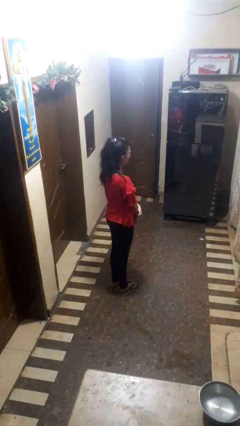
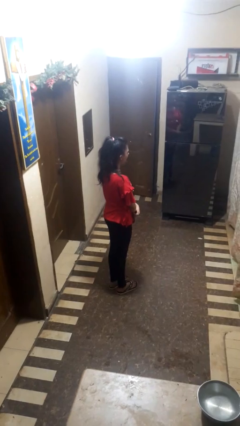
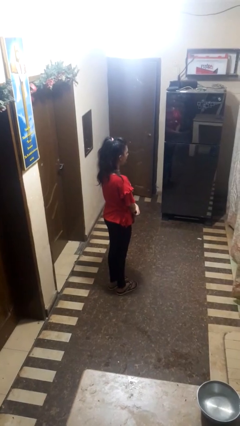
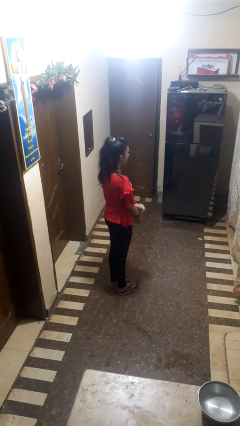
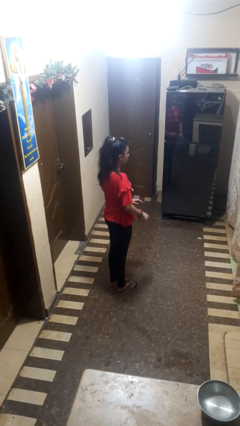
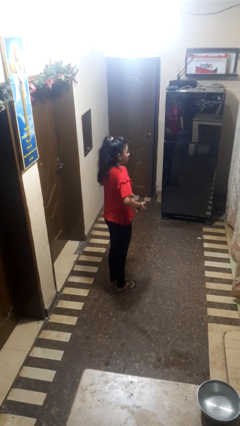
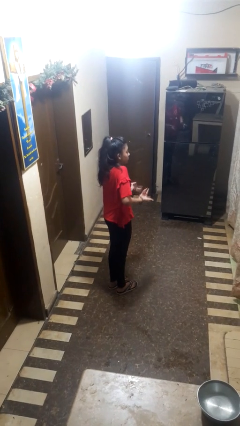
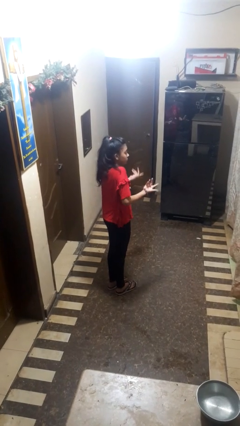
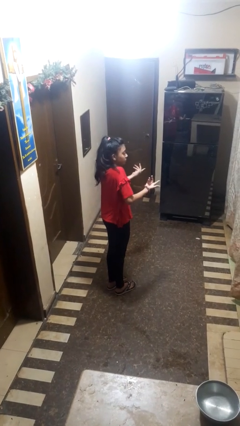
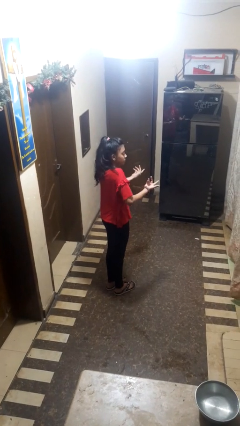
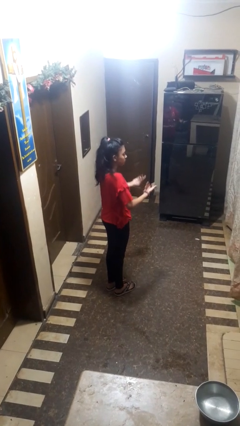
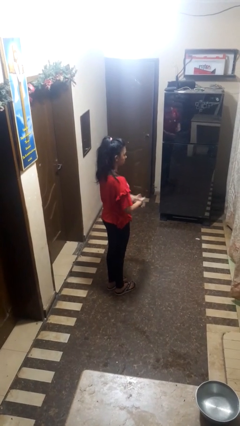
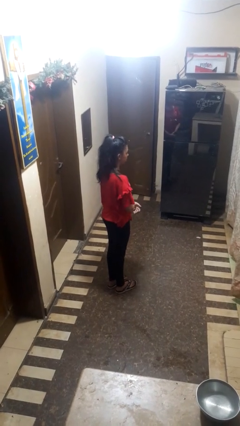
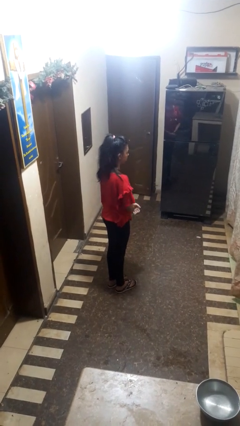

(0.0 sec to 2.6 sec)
person shrugs

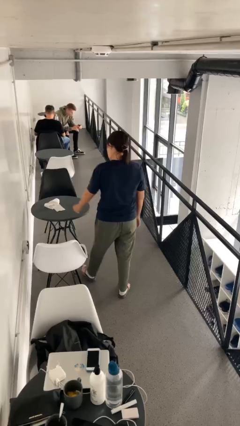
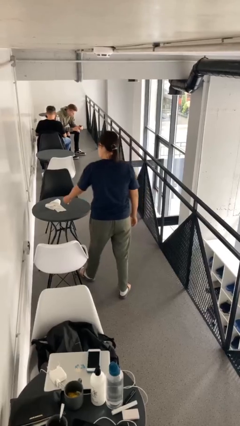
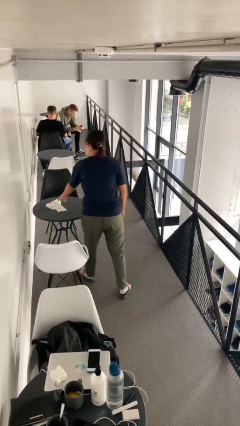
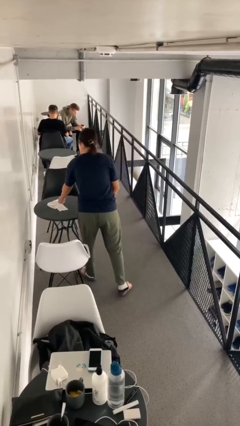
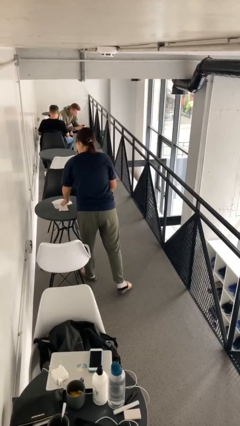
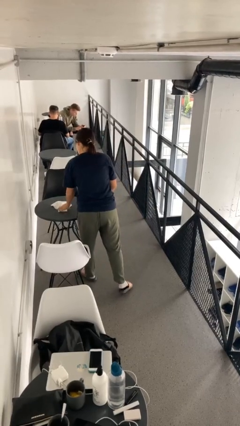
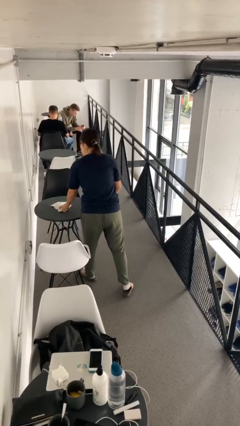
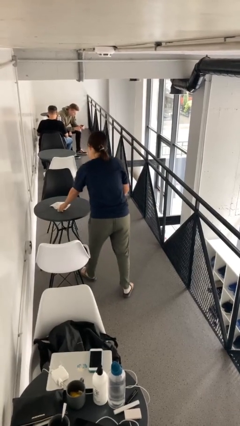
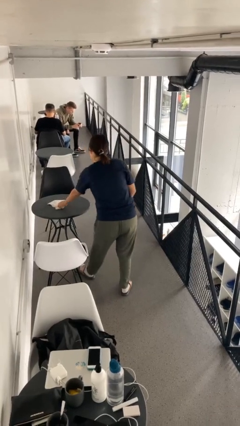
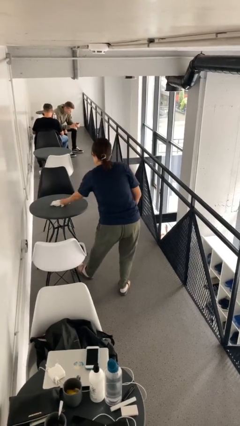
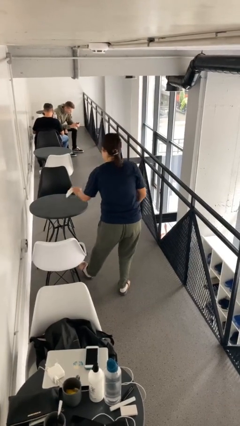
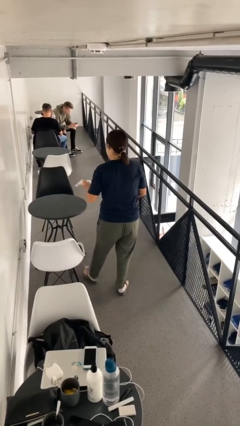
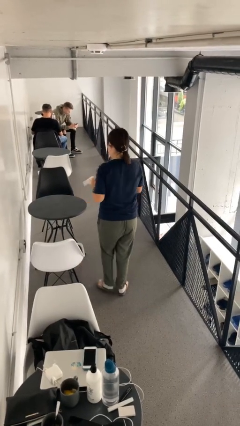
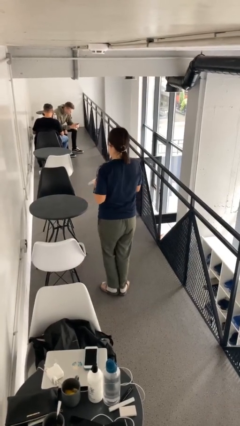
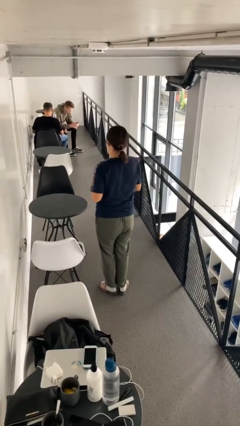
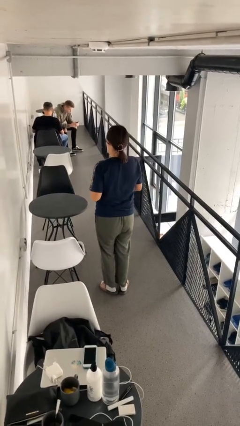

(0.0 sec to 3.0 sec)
person picks up object from table

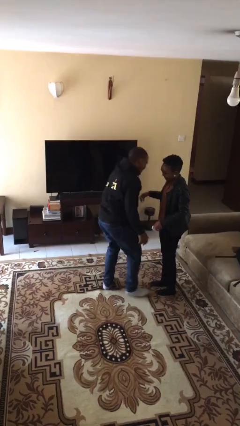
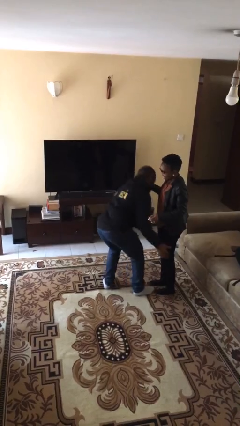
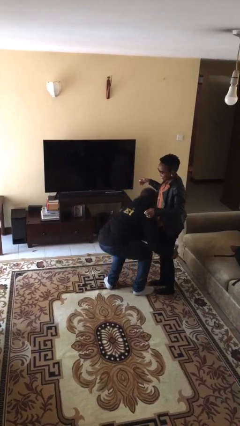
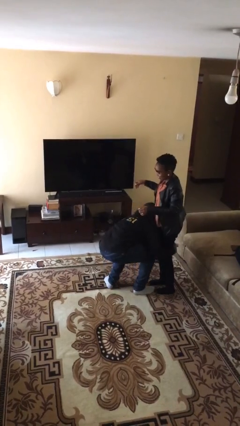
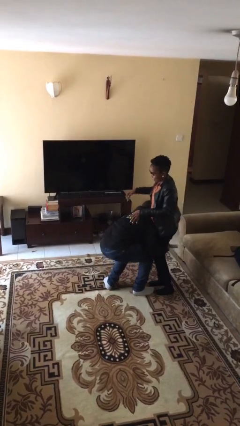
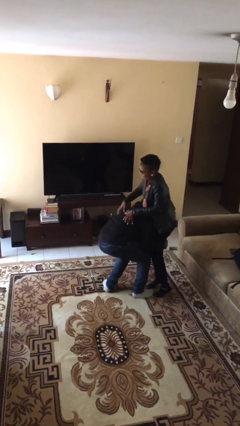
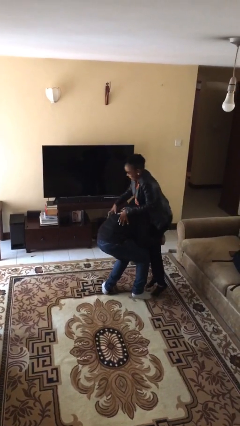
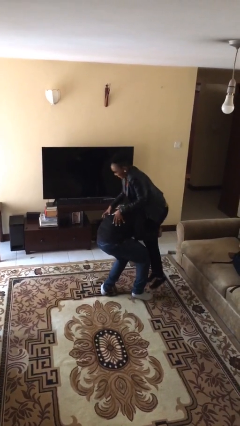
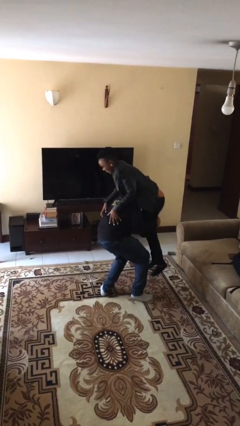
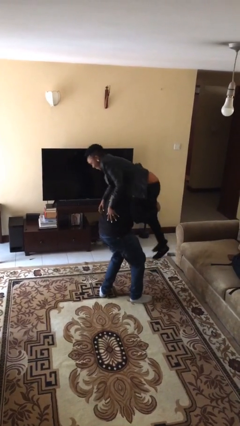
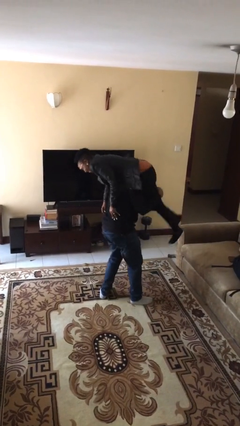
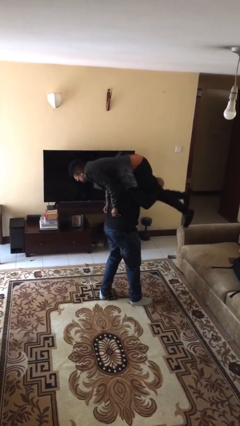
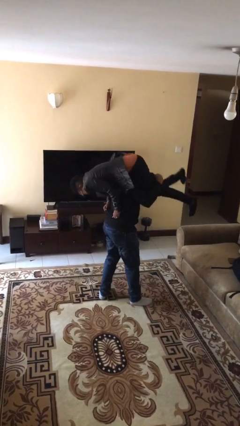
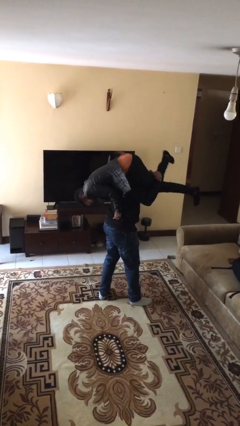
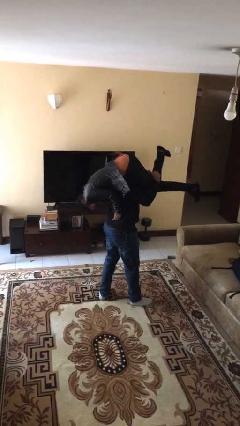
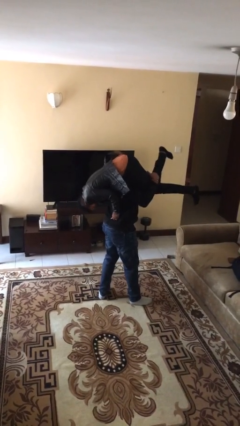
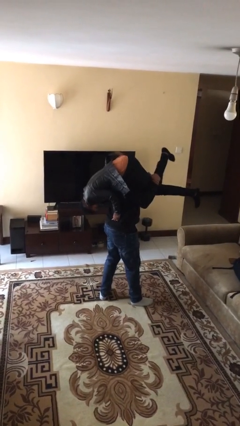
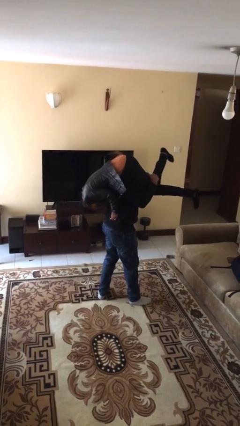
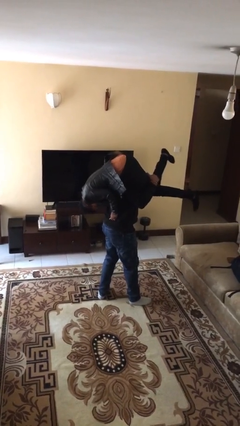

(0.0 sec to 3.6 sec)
person carries person over shoulder

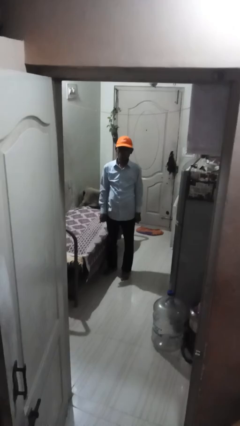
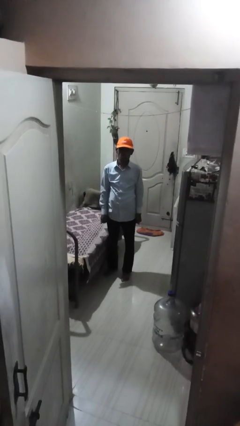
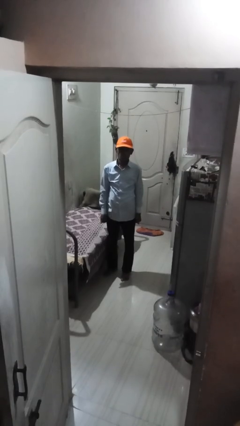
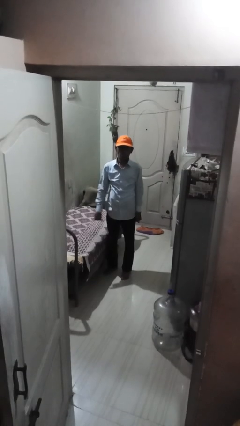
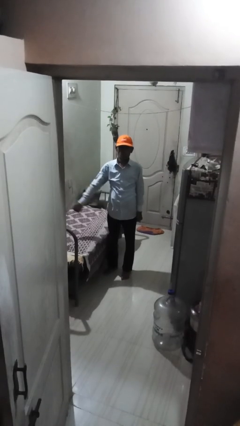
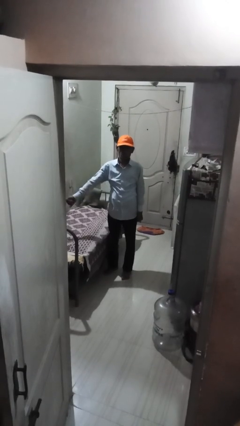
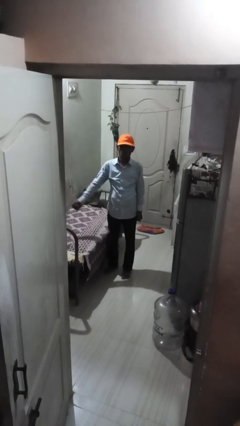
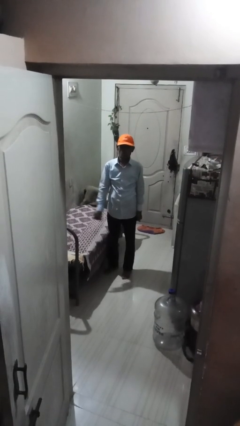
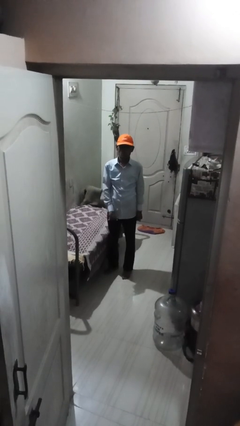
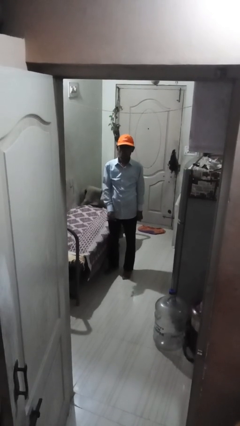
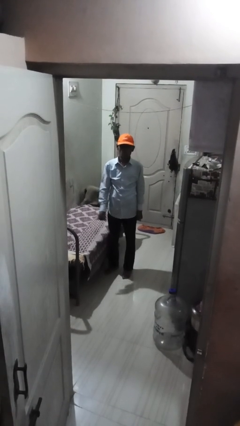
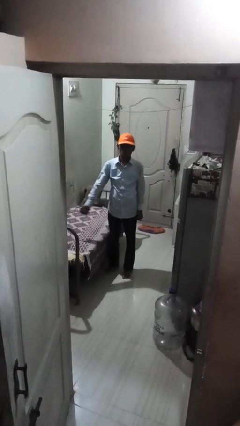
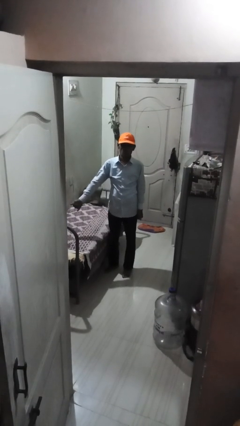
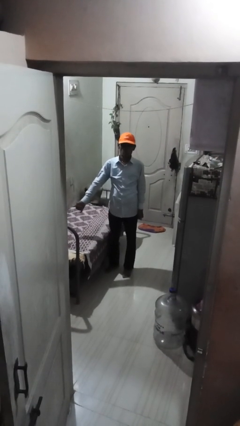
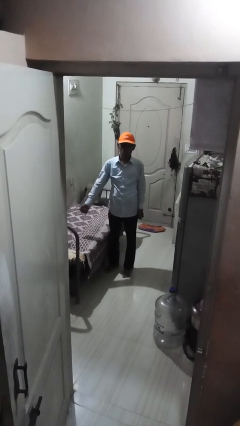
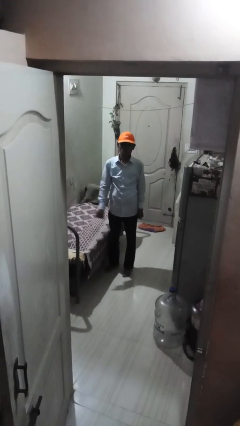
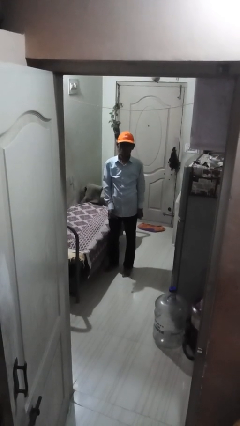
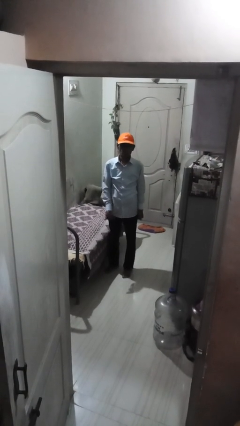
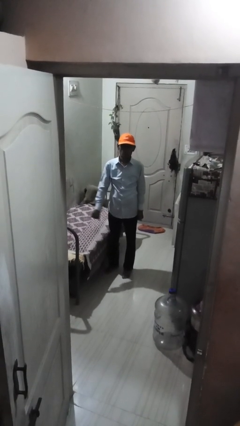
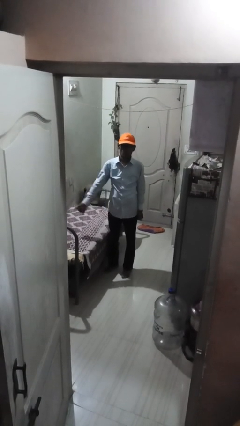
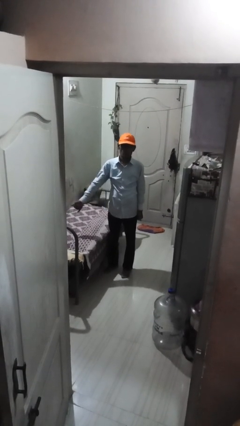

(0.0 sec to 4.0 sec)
person gestures hang loose

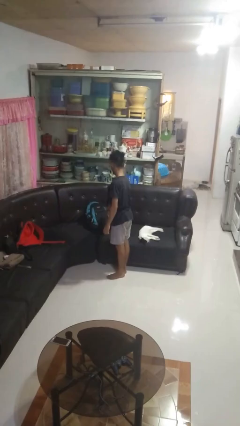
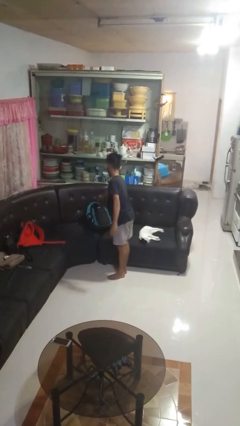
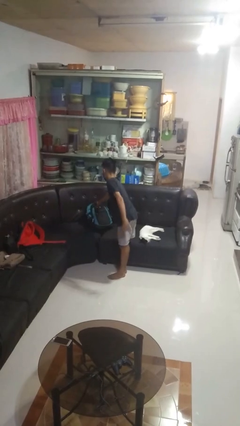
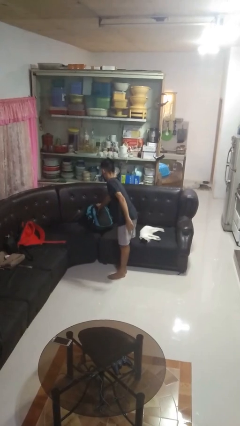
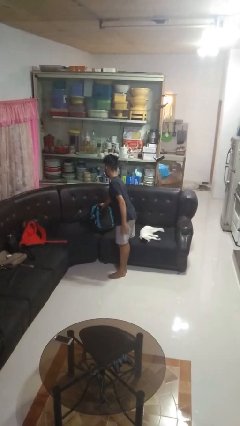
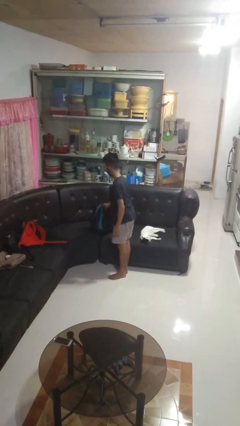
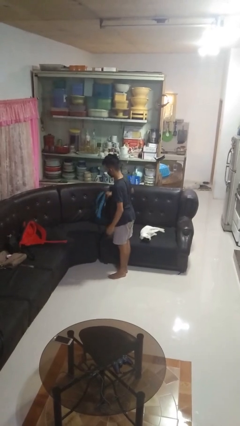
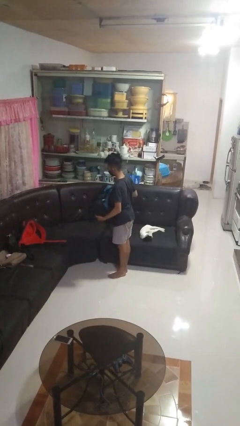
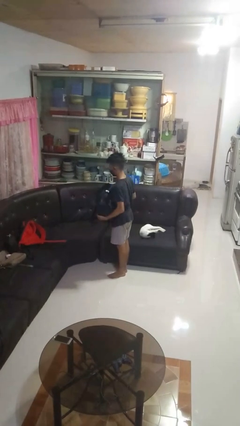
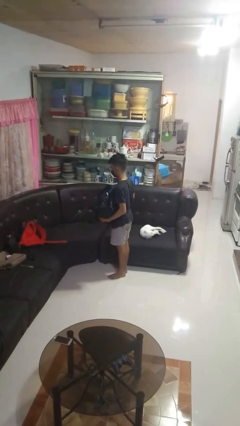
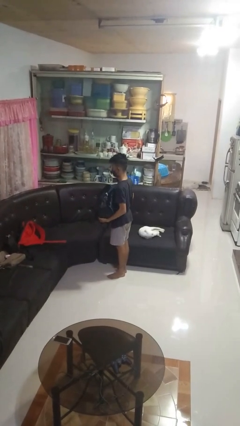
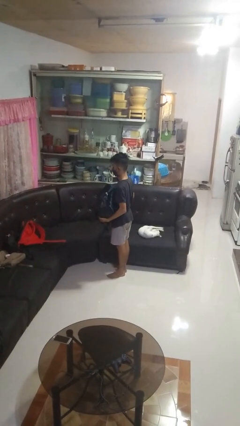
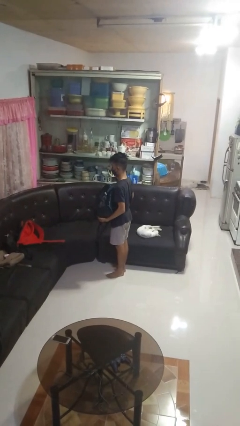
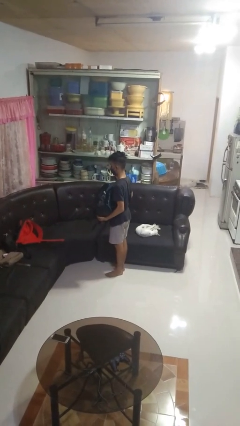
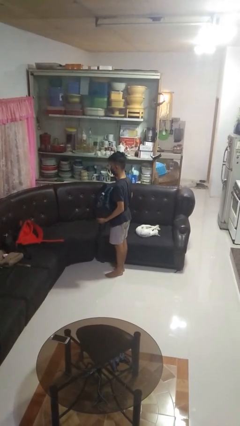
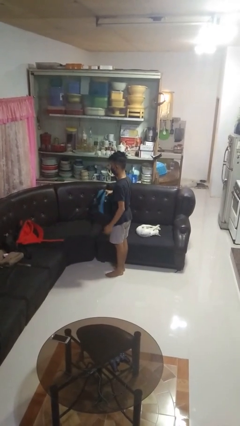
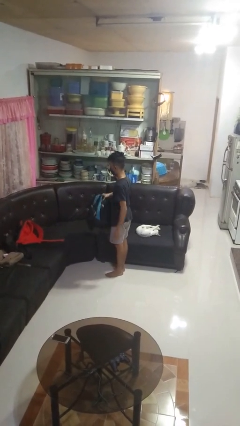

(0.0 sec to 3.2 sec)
person picks up object from couch

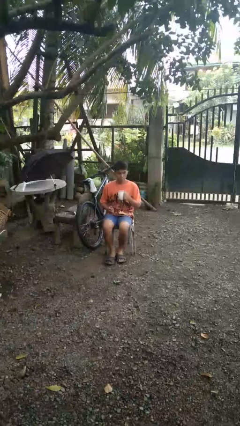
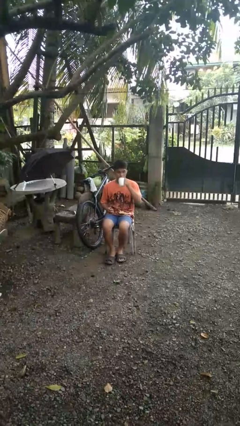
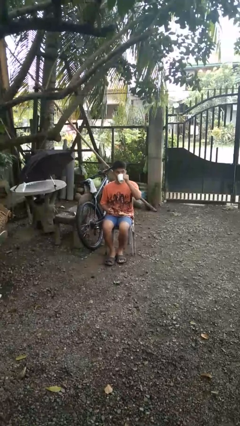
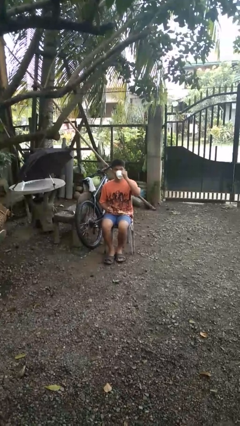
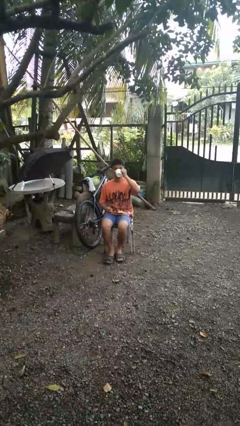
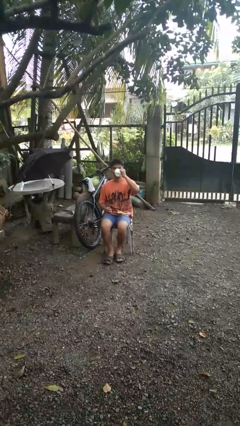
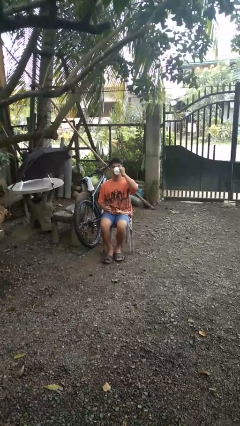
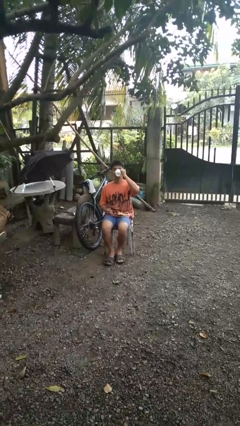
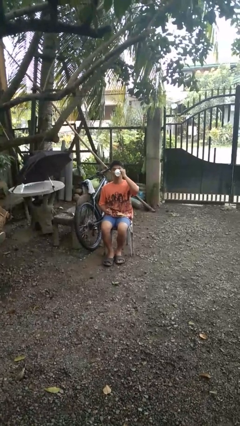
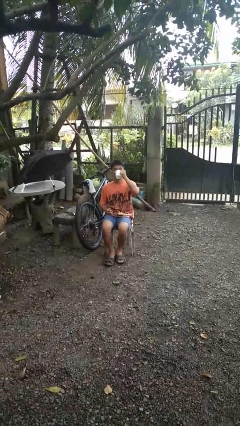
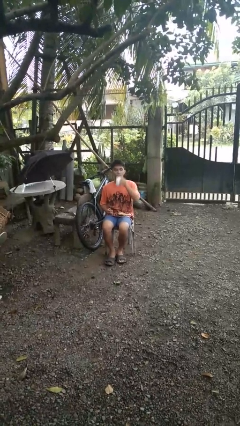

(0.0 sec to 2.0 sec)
person drinks from mug
